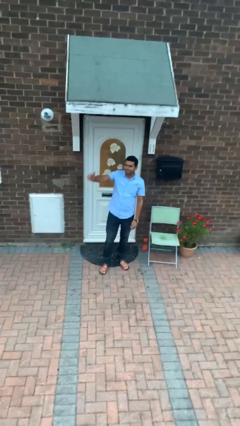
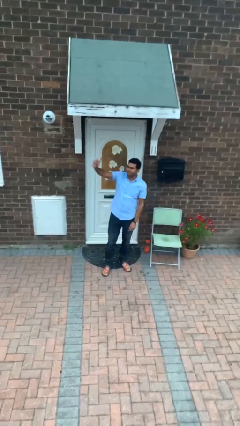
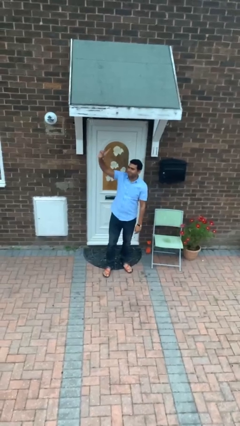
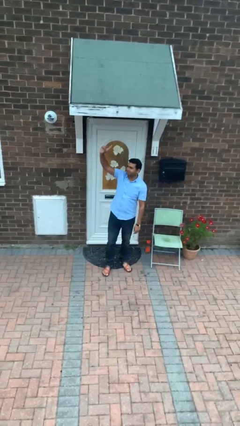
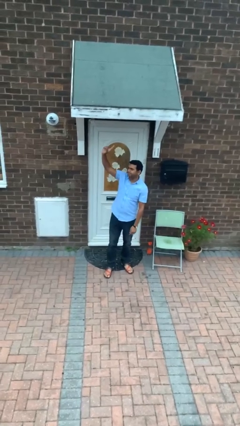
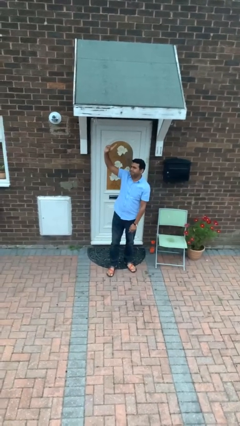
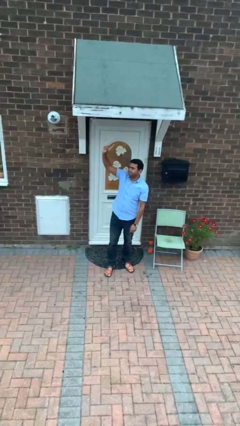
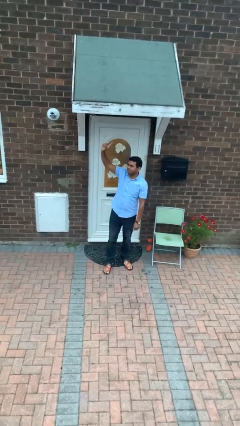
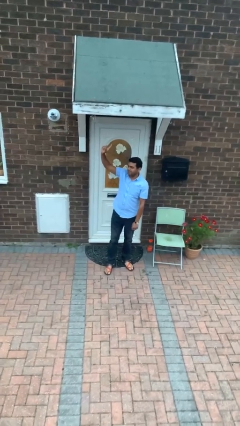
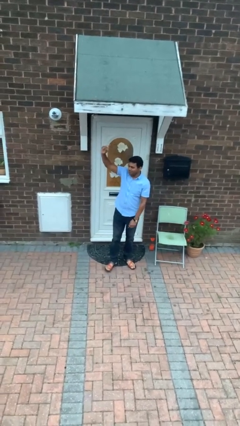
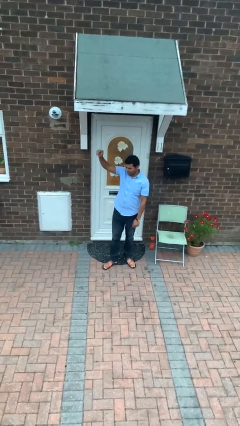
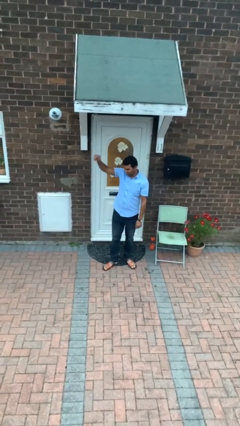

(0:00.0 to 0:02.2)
person gestures raise hand

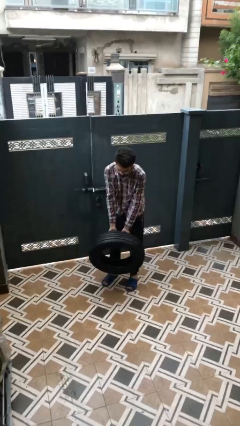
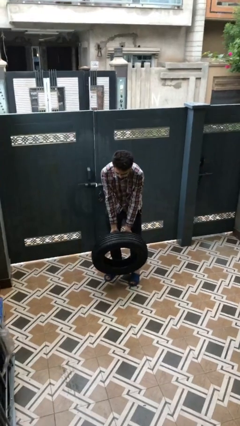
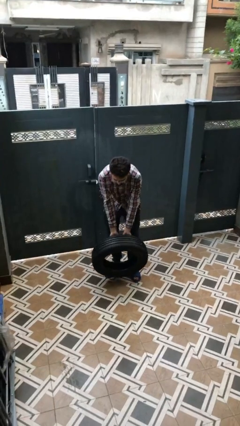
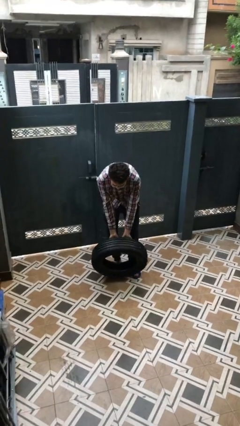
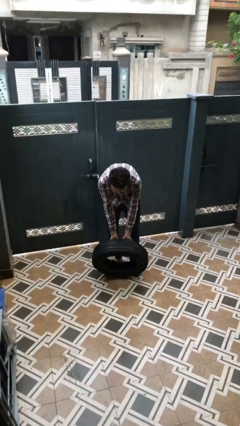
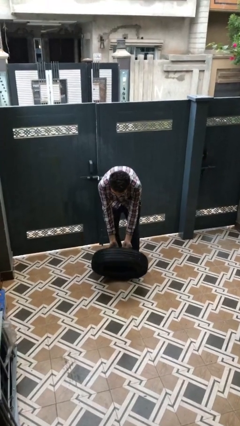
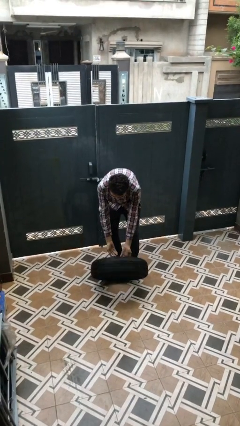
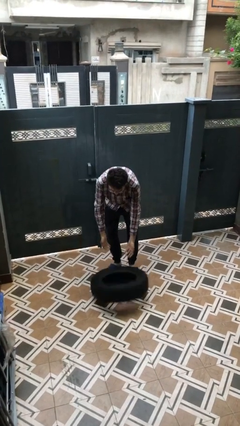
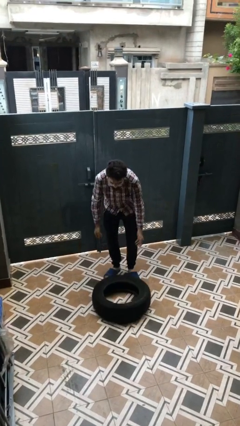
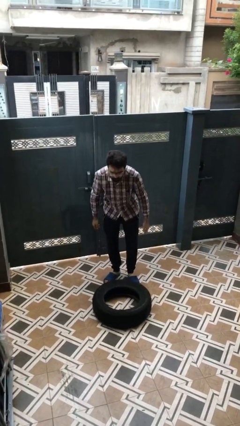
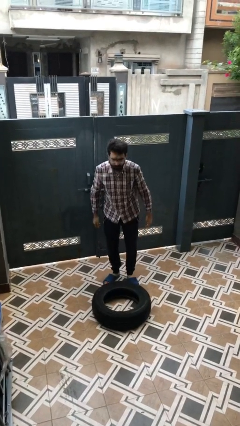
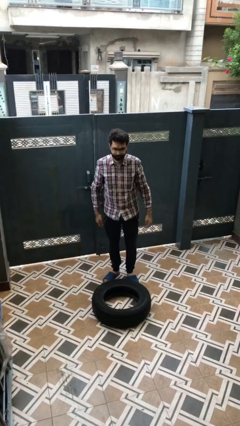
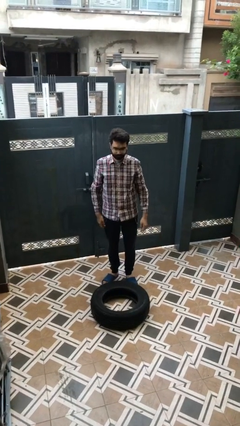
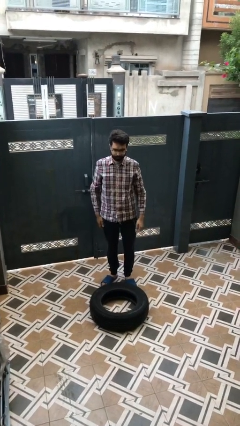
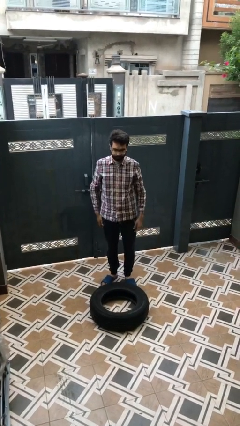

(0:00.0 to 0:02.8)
person puts down object on floor

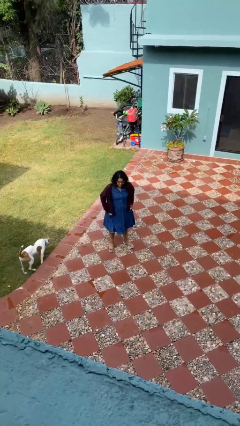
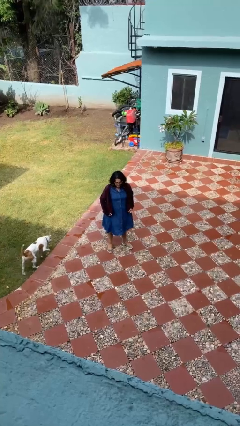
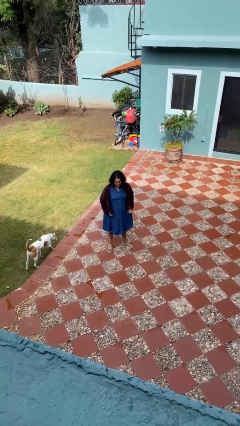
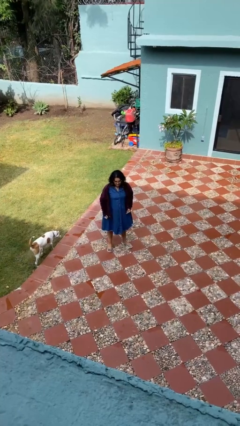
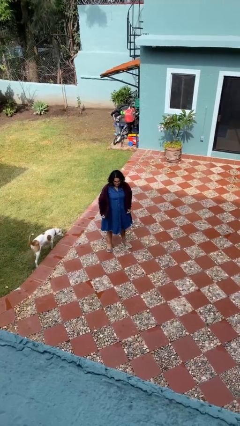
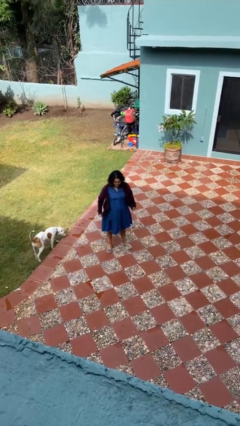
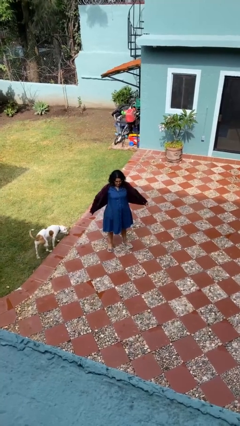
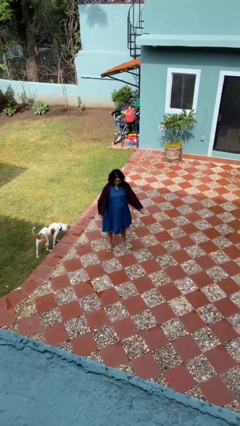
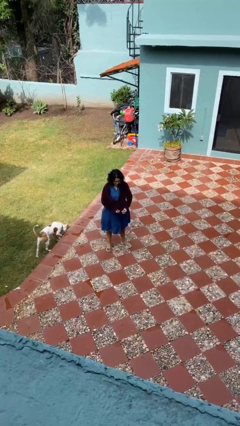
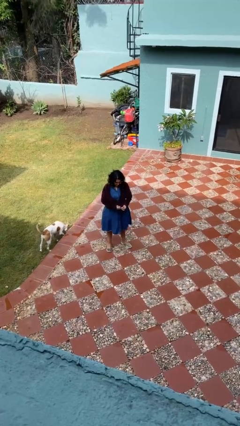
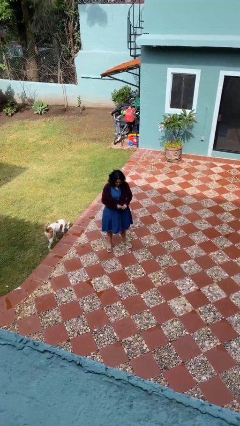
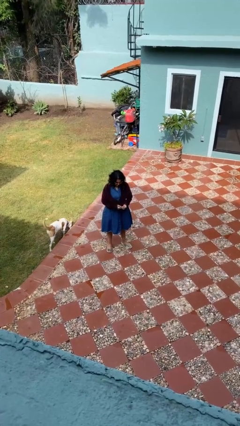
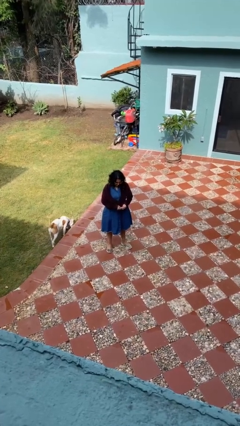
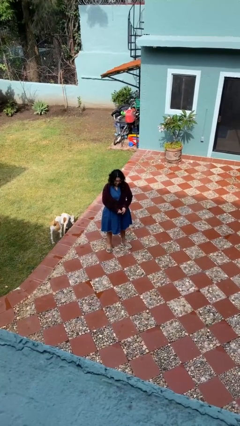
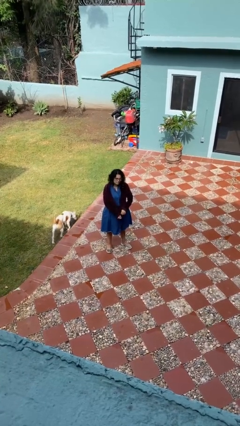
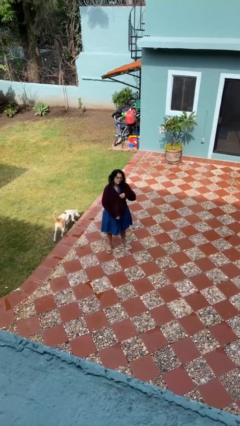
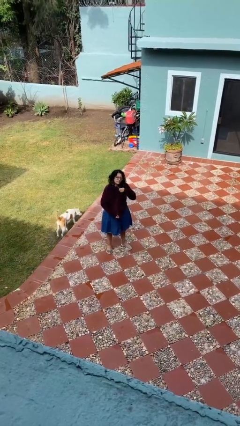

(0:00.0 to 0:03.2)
person zips up jacket

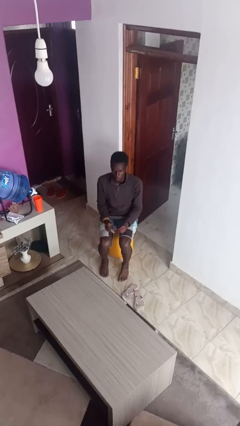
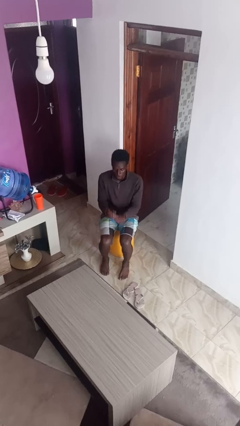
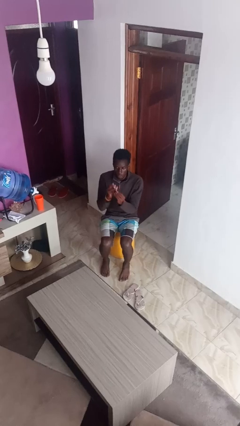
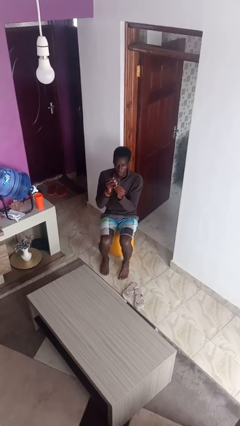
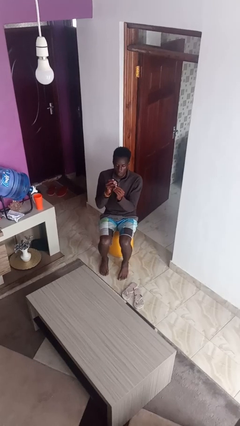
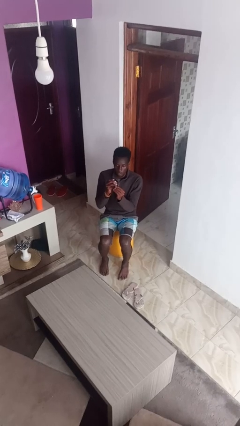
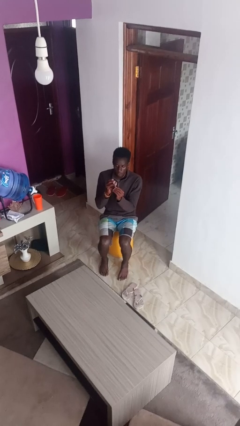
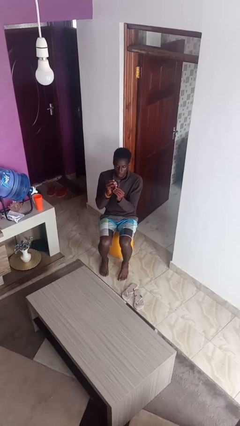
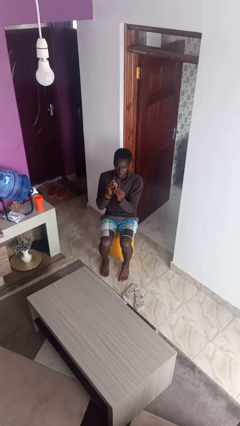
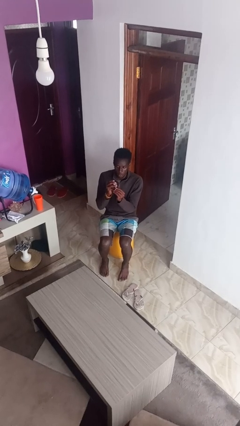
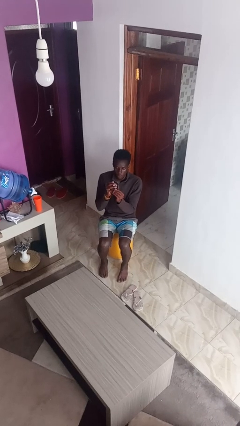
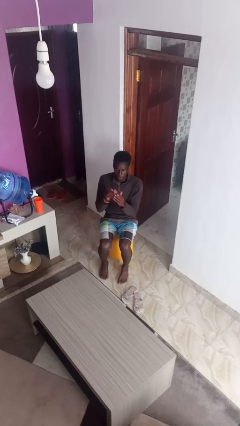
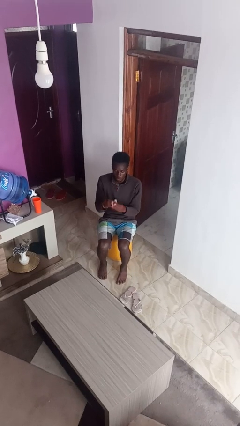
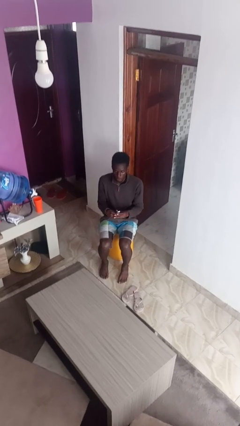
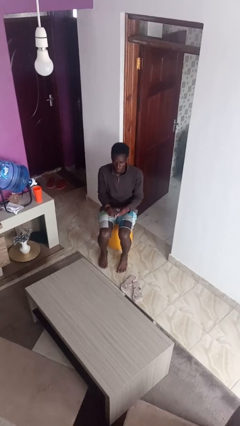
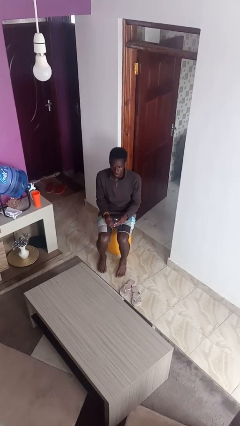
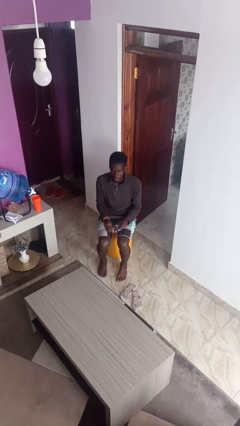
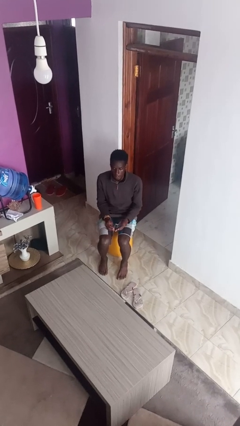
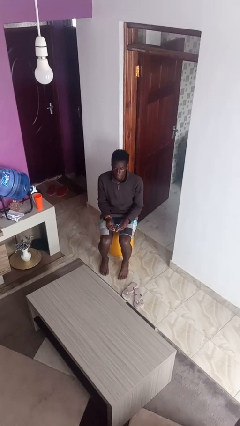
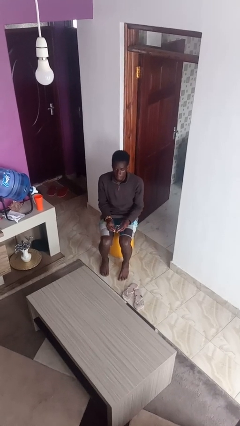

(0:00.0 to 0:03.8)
person clips fingernails

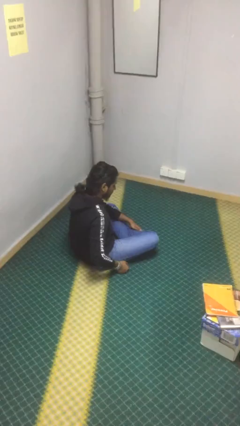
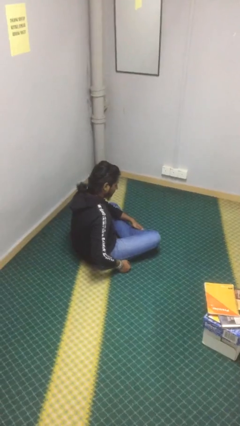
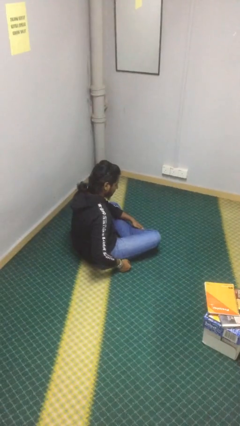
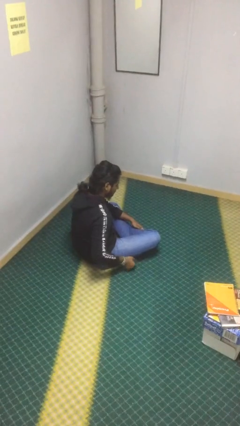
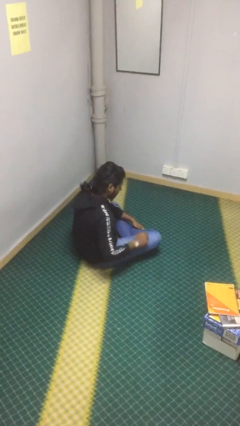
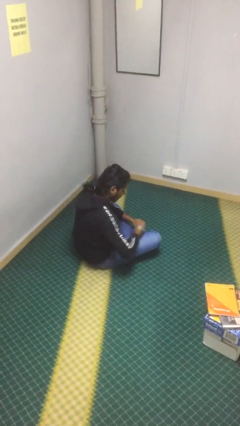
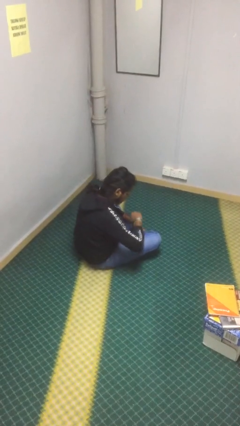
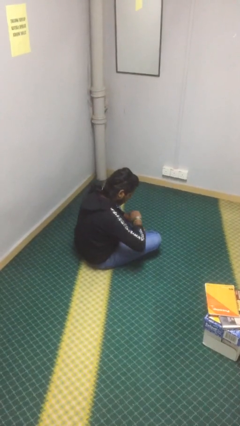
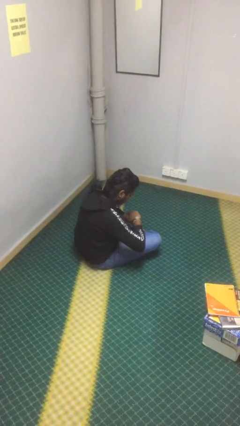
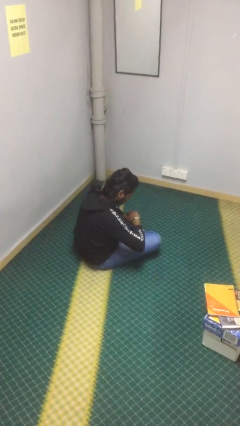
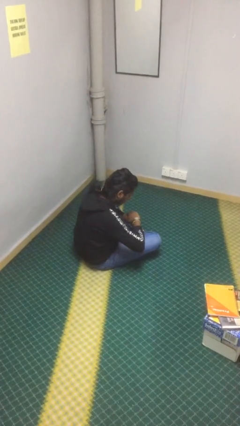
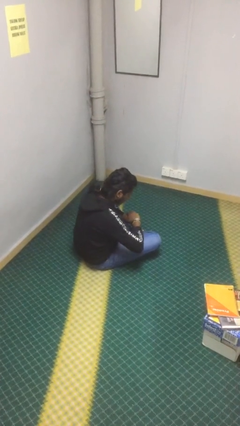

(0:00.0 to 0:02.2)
person looks at wristwatch

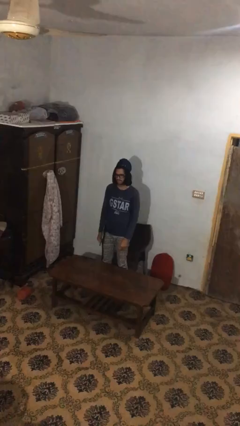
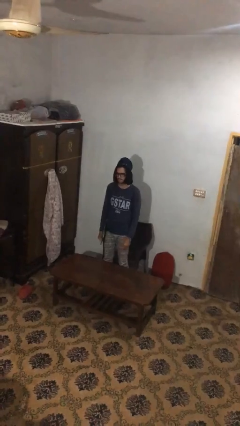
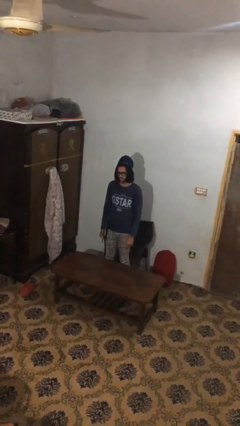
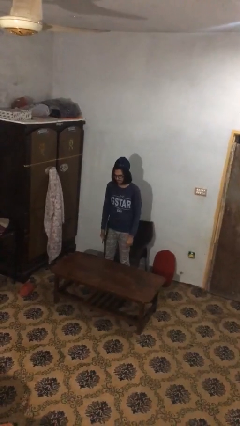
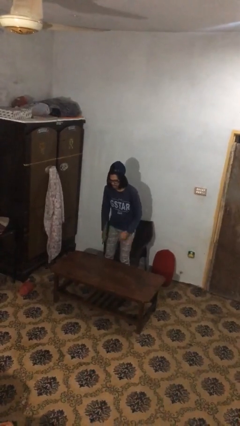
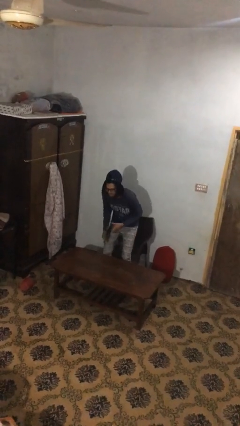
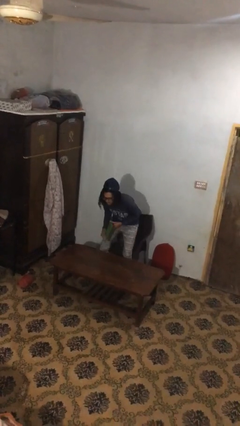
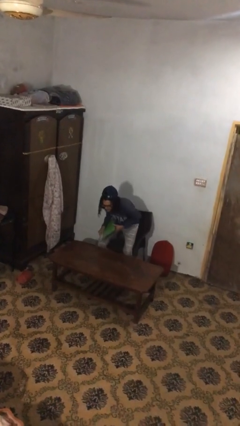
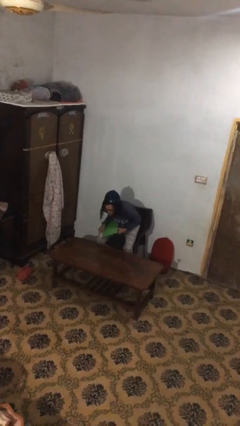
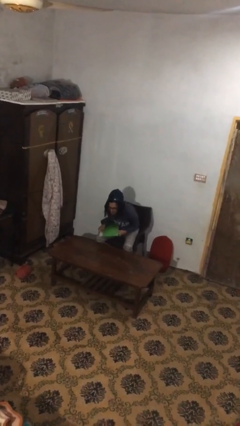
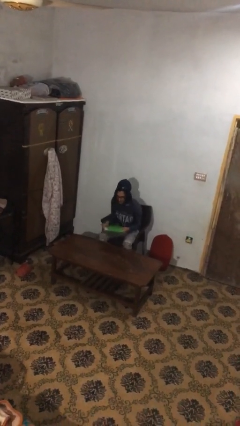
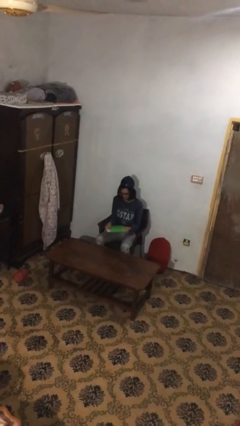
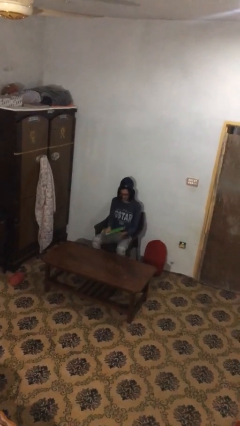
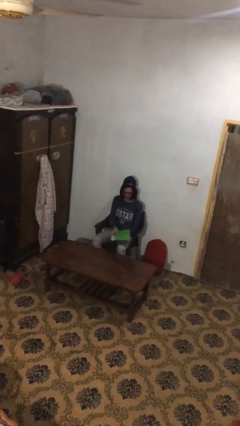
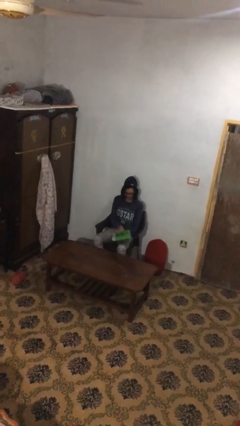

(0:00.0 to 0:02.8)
person sits down
